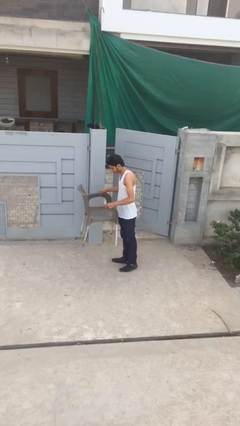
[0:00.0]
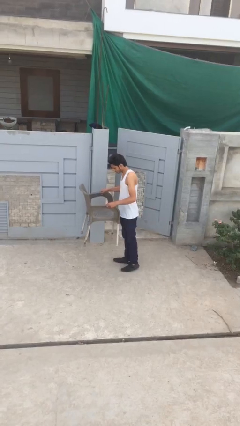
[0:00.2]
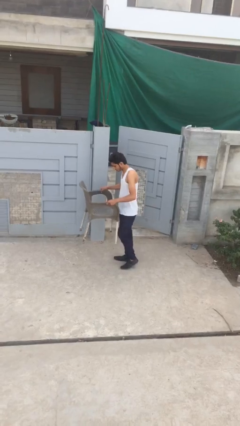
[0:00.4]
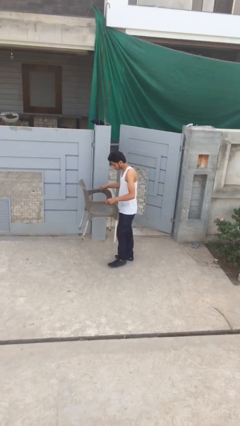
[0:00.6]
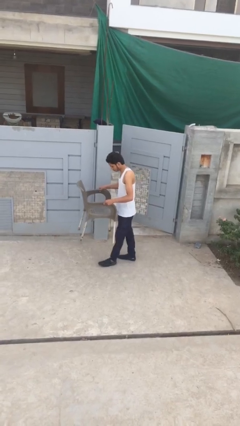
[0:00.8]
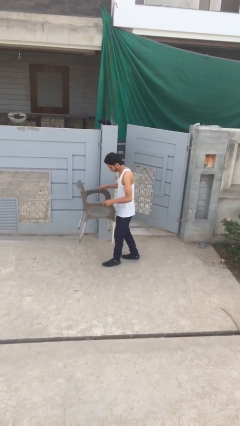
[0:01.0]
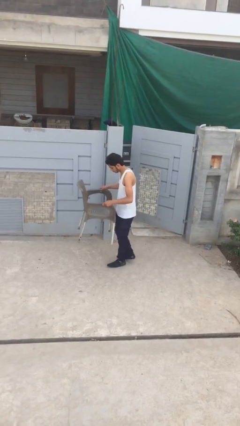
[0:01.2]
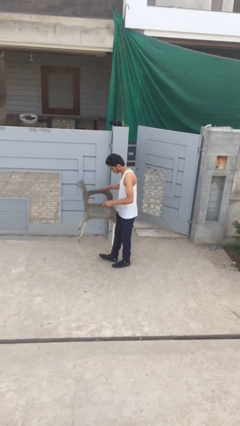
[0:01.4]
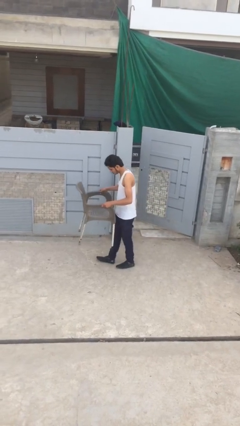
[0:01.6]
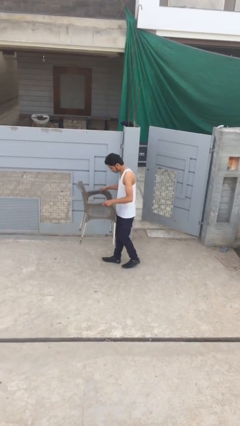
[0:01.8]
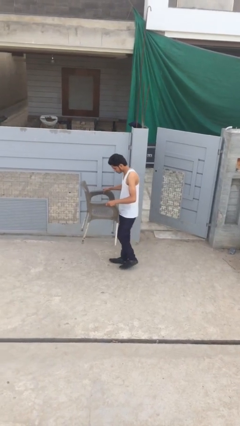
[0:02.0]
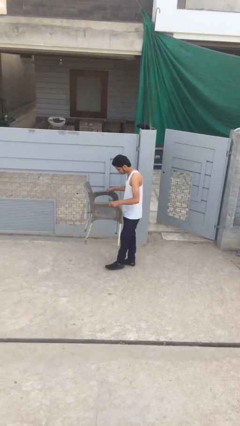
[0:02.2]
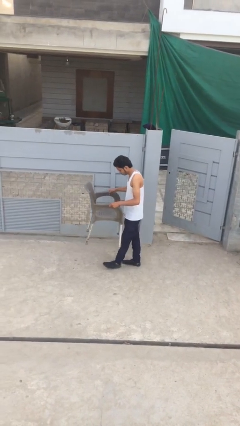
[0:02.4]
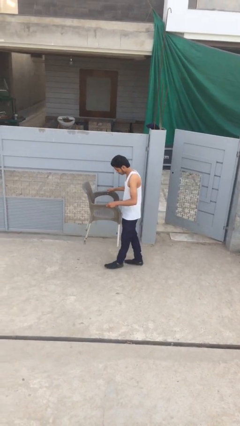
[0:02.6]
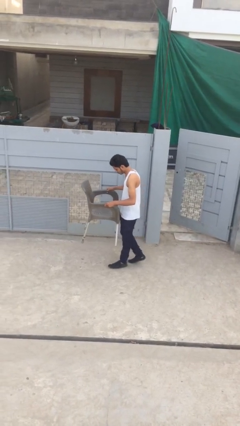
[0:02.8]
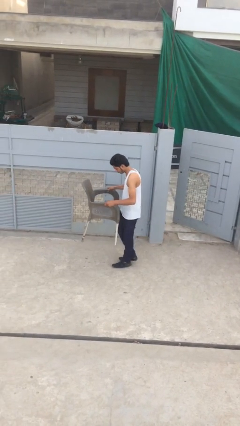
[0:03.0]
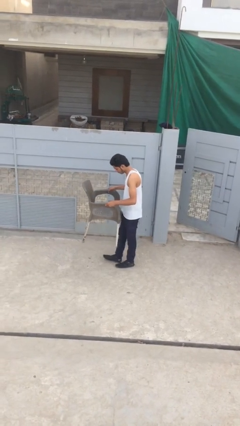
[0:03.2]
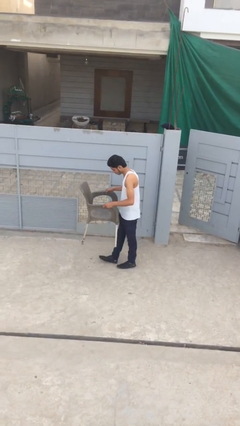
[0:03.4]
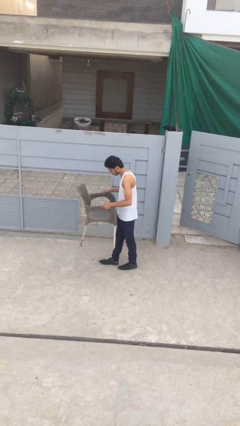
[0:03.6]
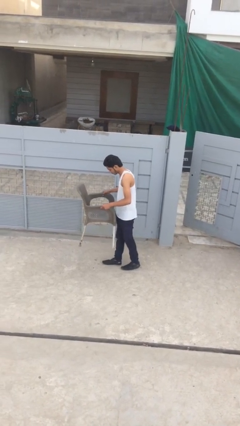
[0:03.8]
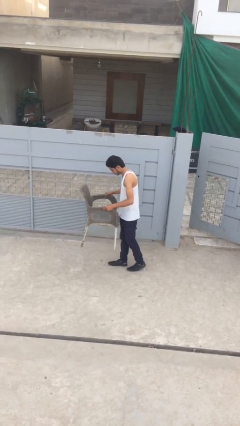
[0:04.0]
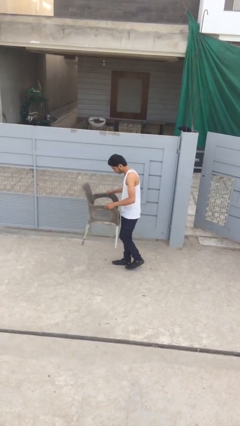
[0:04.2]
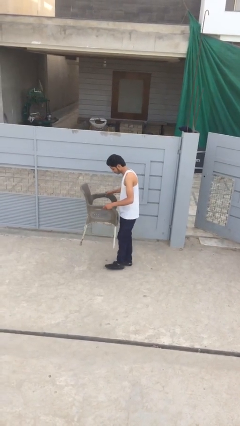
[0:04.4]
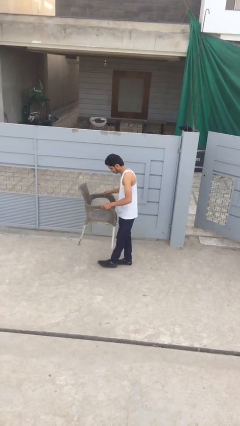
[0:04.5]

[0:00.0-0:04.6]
person carries heavy object

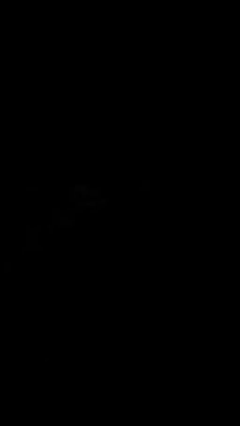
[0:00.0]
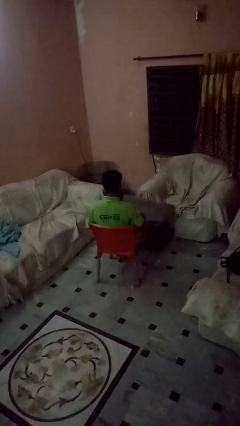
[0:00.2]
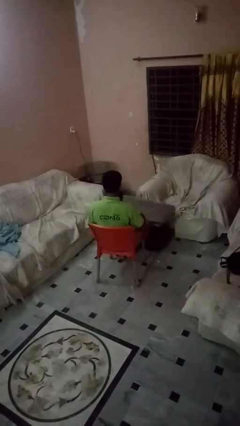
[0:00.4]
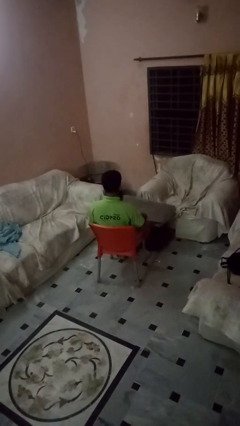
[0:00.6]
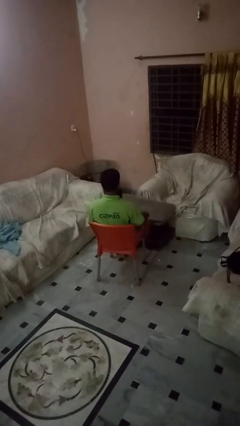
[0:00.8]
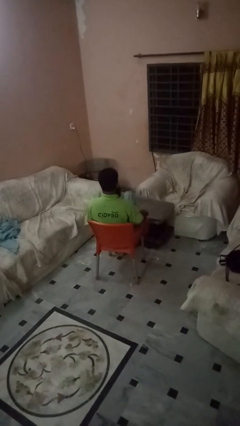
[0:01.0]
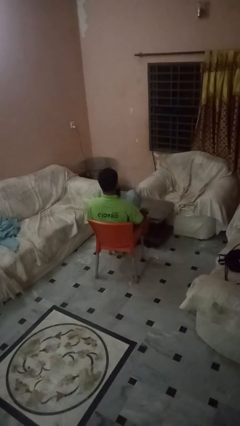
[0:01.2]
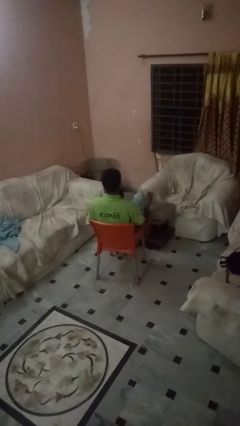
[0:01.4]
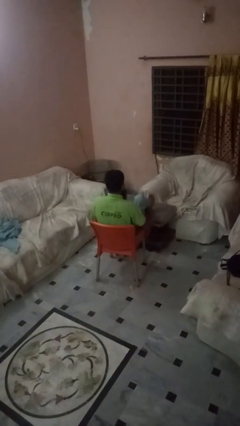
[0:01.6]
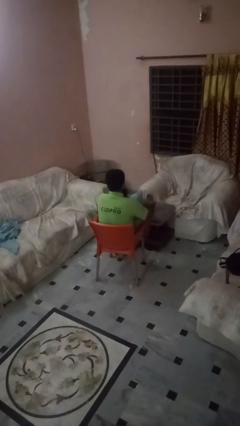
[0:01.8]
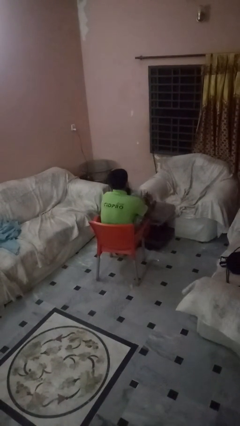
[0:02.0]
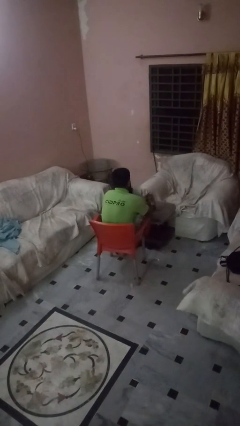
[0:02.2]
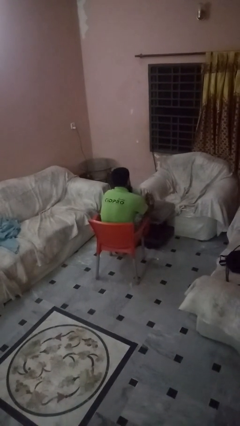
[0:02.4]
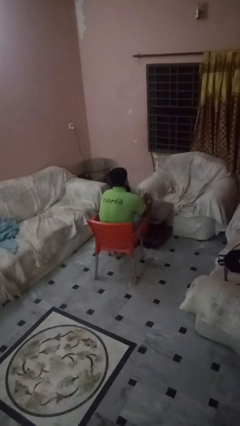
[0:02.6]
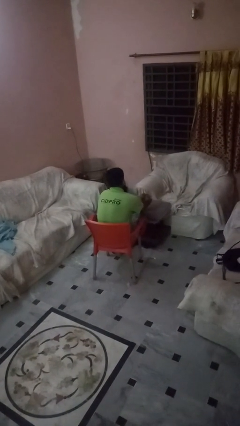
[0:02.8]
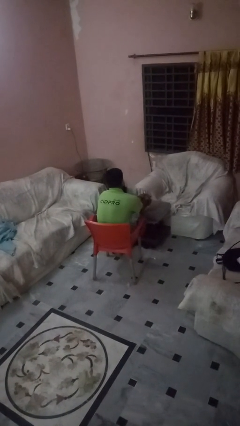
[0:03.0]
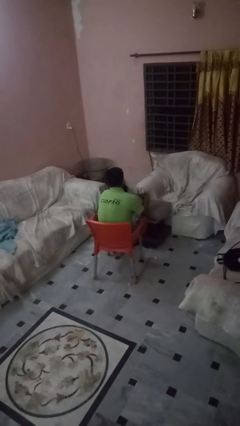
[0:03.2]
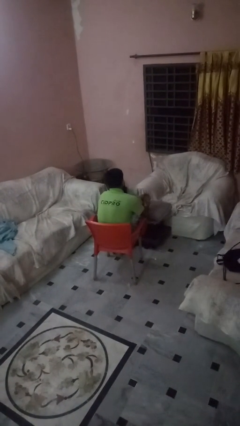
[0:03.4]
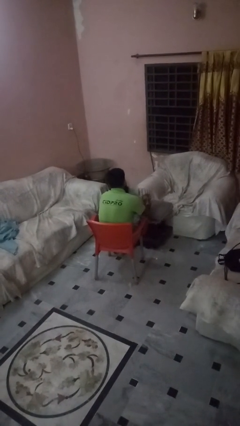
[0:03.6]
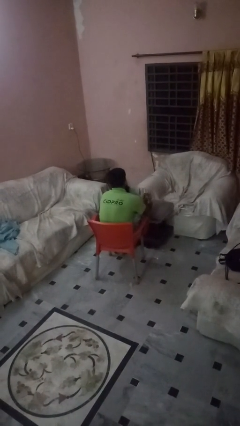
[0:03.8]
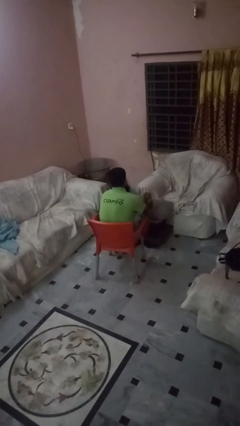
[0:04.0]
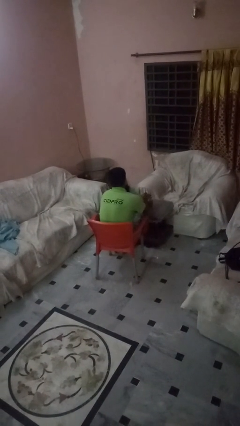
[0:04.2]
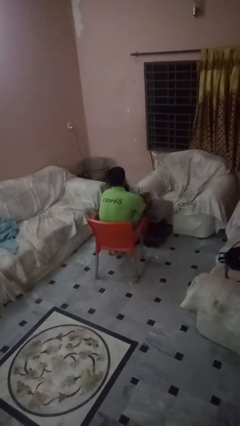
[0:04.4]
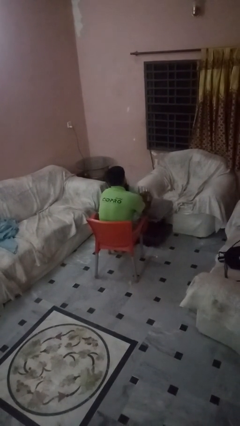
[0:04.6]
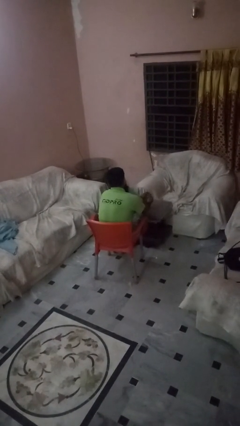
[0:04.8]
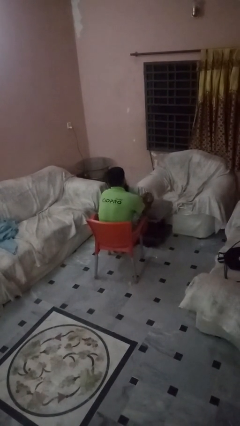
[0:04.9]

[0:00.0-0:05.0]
person rubs foot

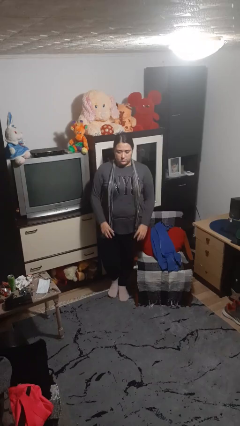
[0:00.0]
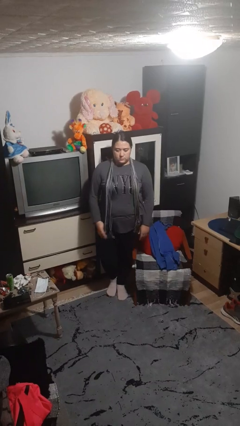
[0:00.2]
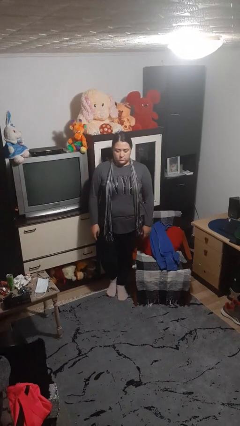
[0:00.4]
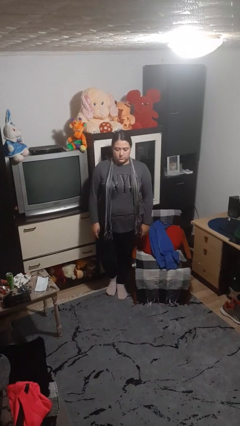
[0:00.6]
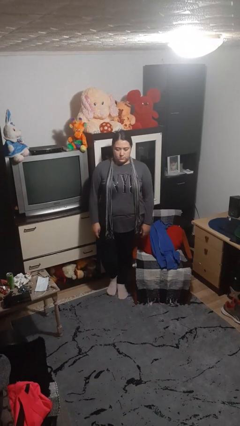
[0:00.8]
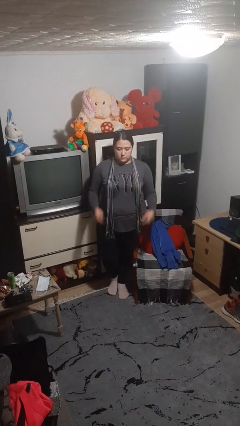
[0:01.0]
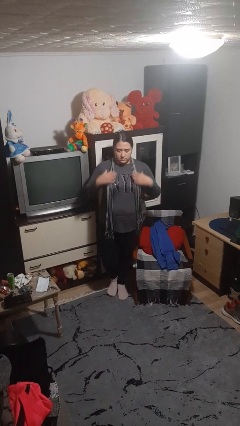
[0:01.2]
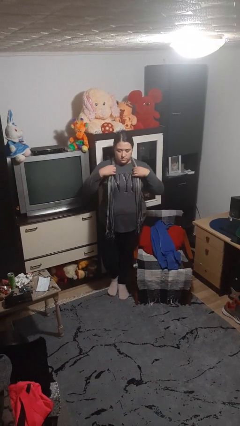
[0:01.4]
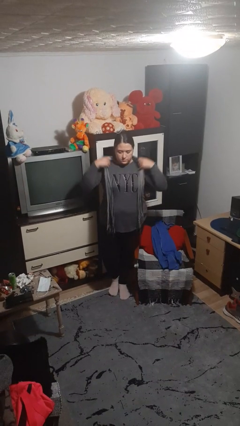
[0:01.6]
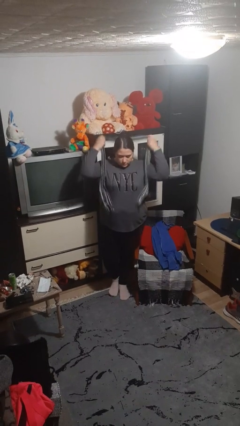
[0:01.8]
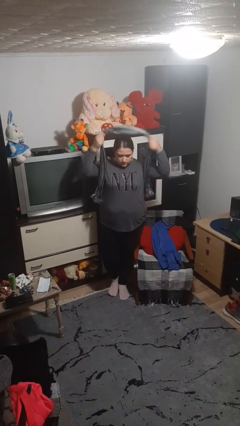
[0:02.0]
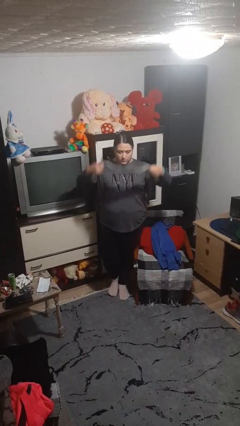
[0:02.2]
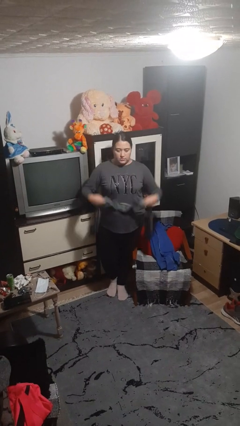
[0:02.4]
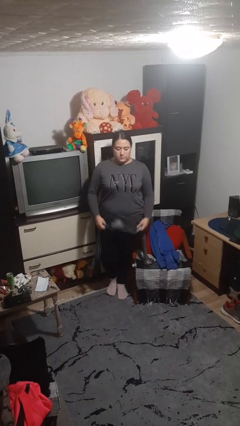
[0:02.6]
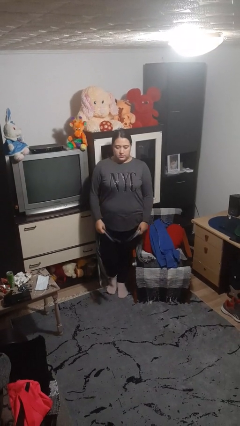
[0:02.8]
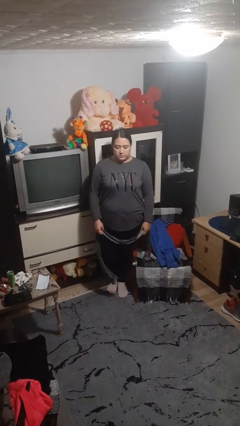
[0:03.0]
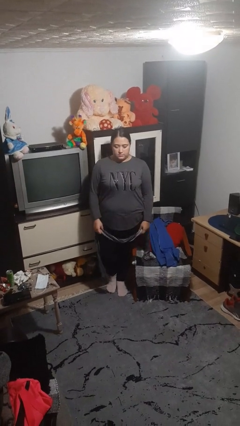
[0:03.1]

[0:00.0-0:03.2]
person takes off scarf

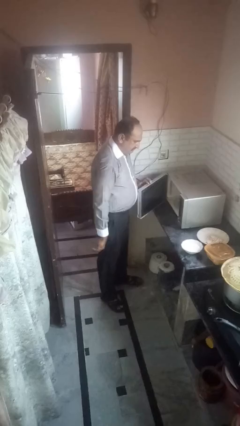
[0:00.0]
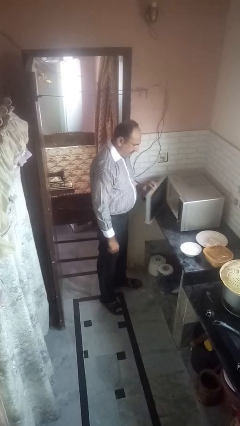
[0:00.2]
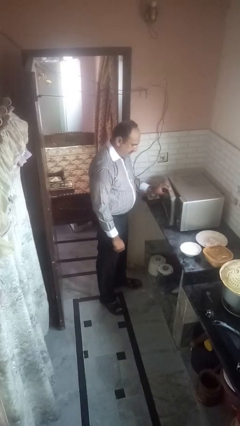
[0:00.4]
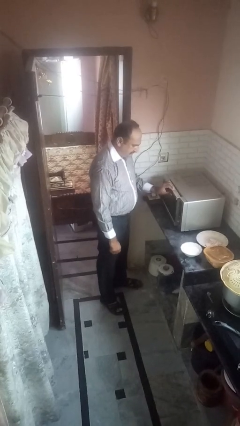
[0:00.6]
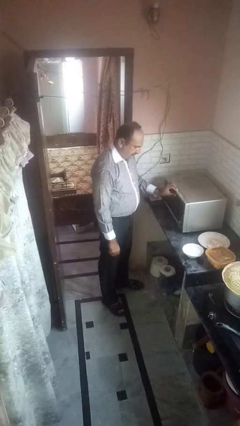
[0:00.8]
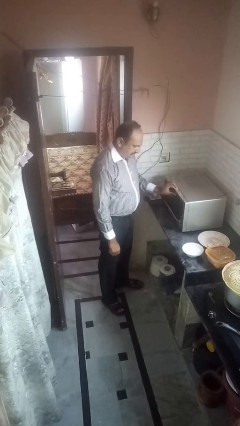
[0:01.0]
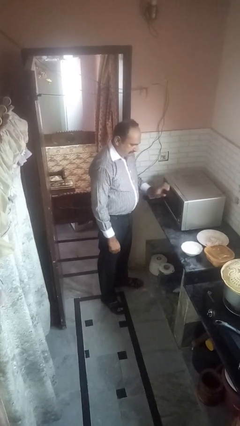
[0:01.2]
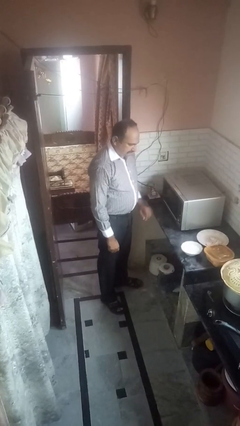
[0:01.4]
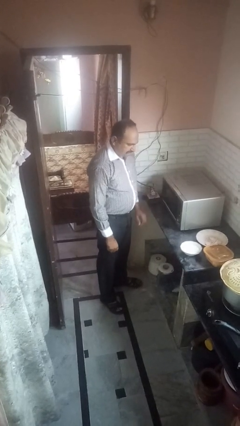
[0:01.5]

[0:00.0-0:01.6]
person closes microwave

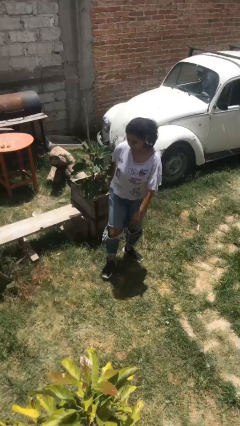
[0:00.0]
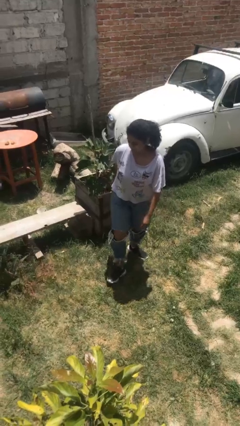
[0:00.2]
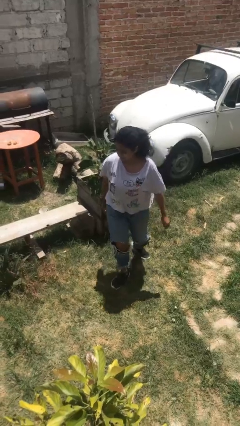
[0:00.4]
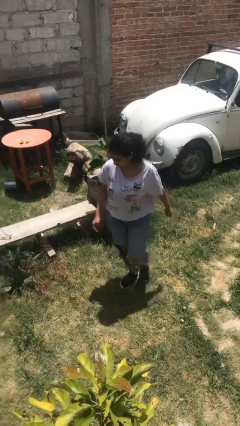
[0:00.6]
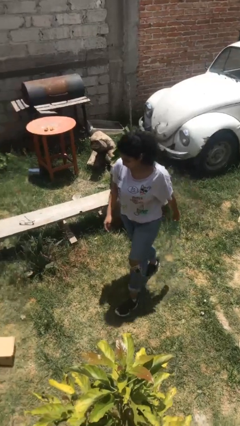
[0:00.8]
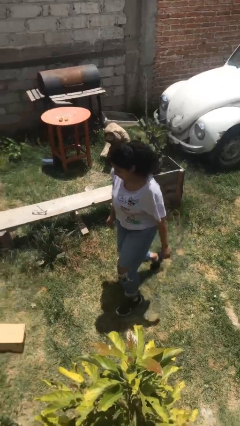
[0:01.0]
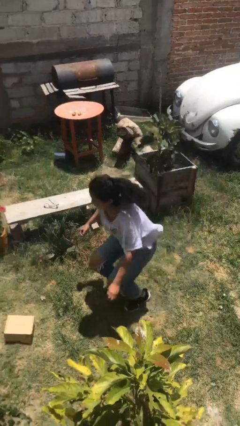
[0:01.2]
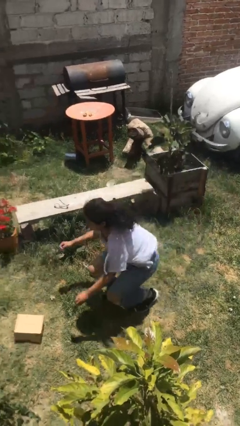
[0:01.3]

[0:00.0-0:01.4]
person trips on object on floor

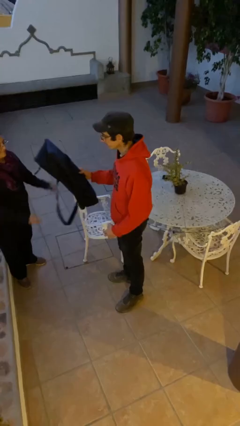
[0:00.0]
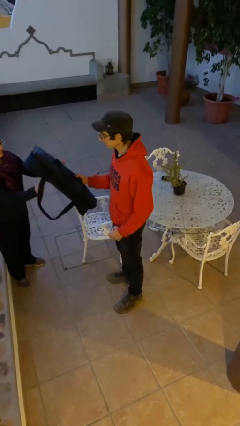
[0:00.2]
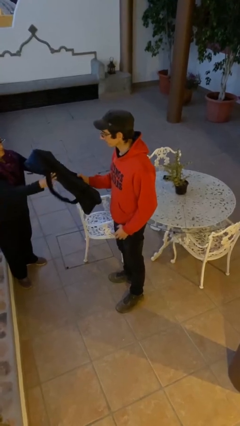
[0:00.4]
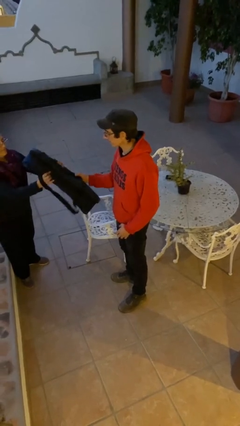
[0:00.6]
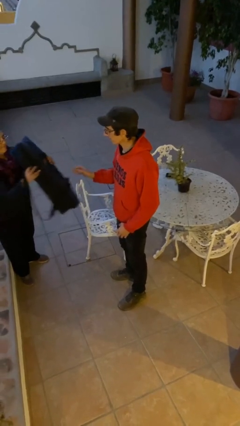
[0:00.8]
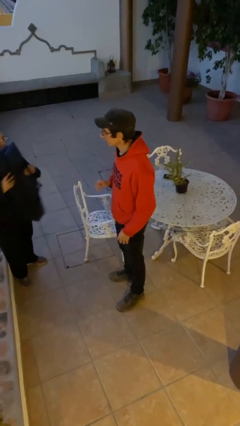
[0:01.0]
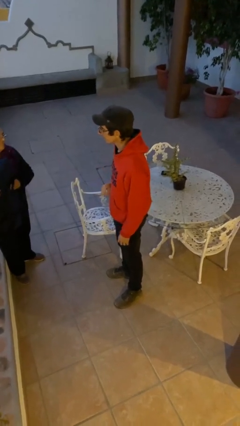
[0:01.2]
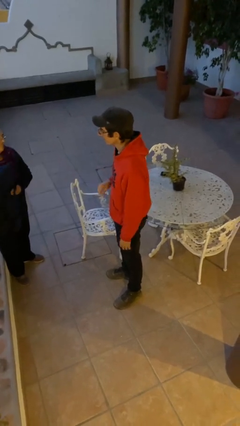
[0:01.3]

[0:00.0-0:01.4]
person transfers object to person

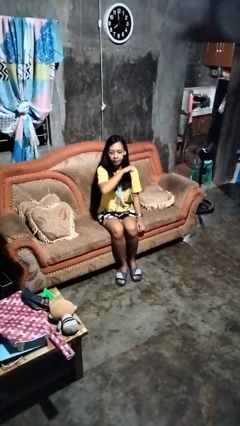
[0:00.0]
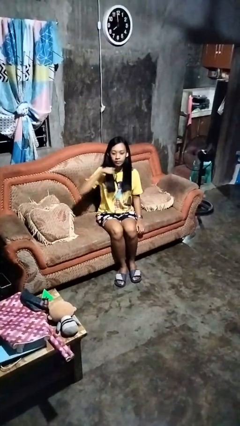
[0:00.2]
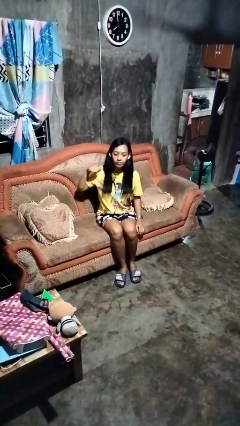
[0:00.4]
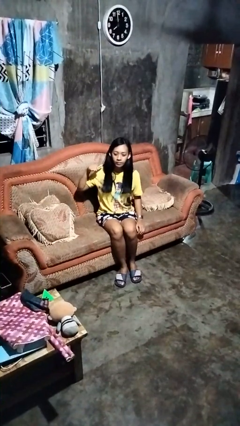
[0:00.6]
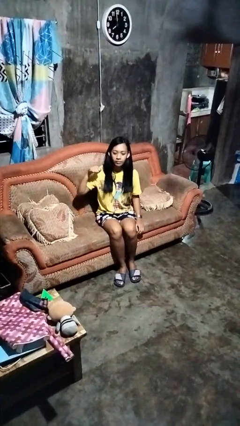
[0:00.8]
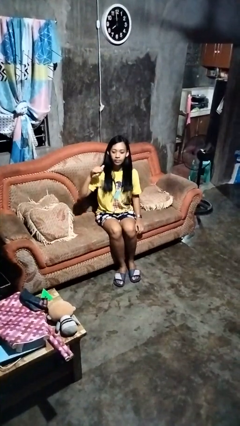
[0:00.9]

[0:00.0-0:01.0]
person gestures cut
